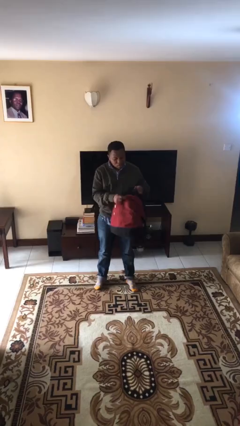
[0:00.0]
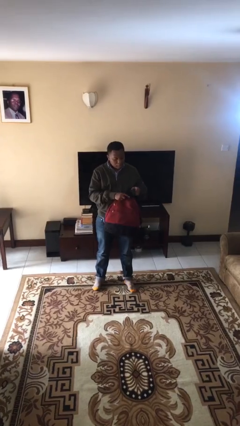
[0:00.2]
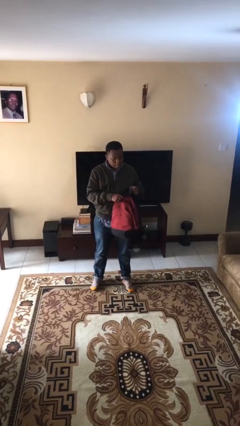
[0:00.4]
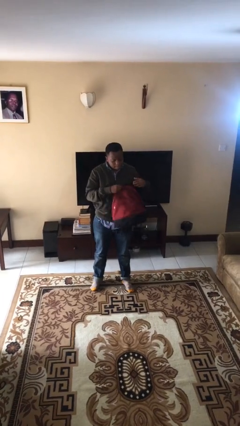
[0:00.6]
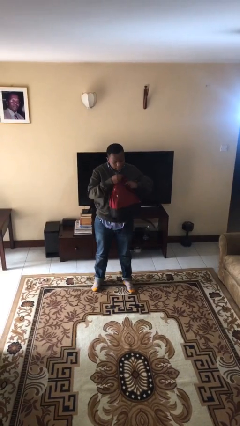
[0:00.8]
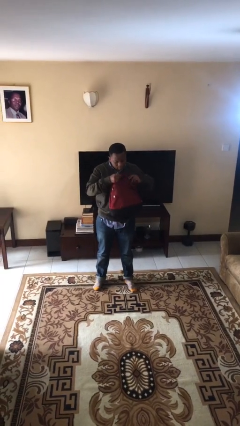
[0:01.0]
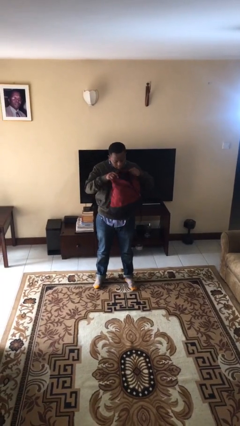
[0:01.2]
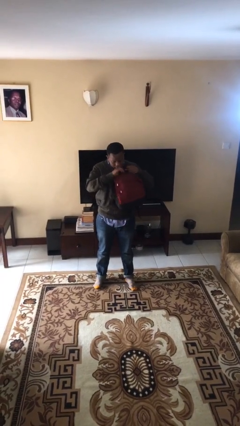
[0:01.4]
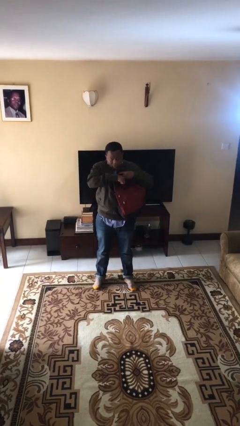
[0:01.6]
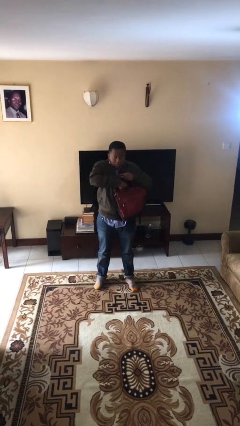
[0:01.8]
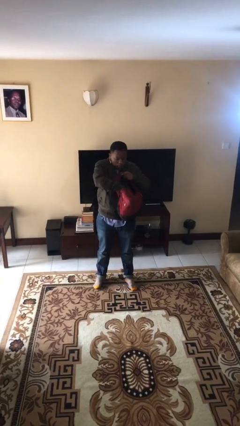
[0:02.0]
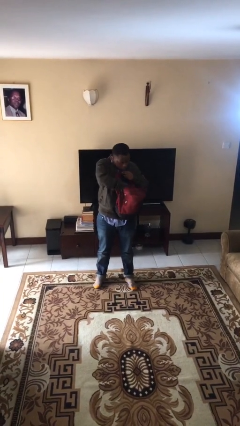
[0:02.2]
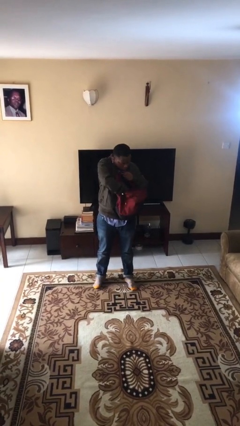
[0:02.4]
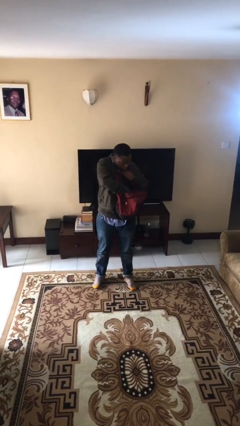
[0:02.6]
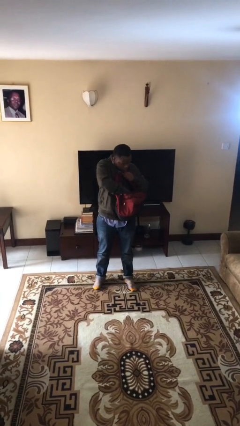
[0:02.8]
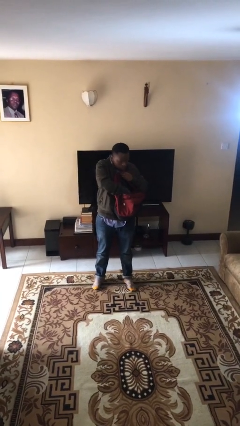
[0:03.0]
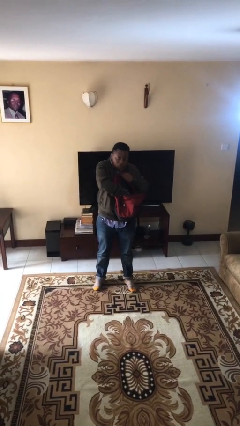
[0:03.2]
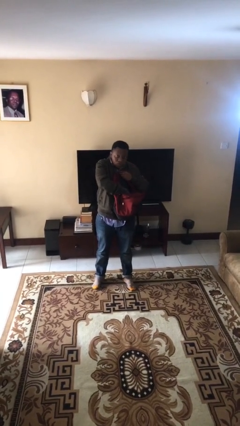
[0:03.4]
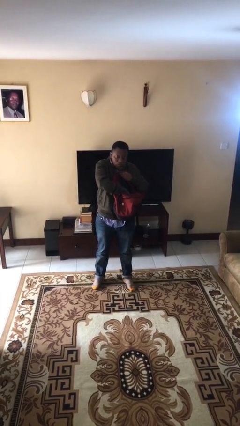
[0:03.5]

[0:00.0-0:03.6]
person searches in backpack

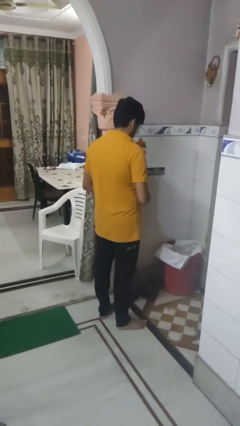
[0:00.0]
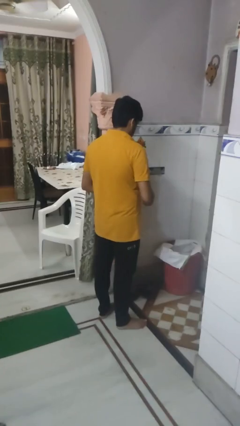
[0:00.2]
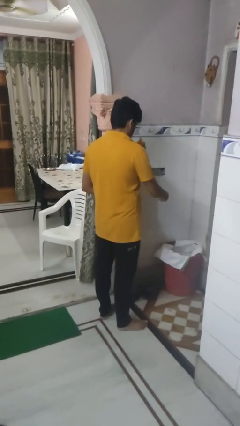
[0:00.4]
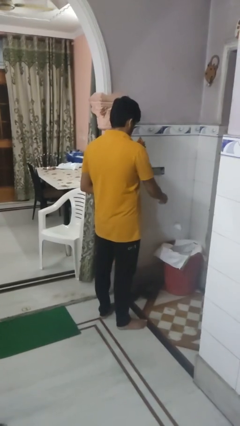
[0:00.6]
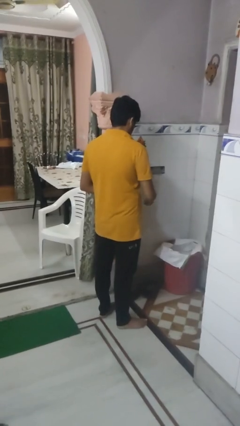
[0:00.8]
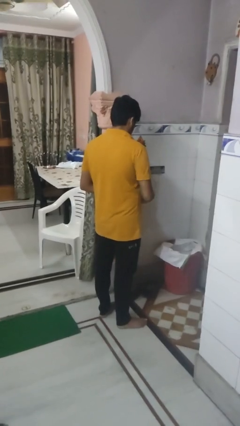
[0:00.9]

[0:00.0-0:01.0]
person discards trash

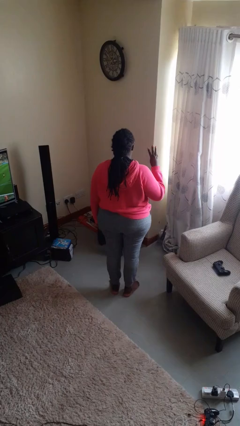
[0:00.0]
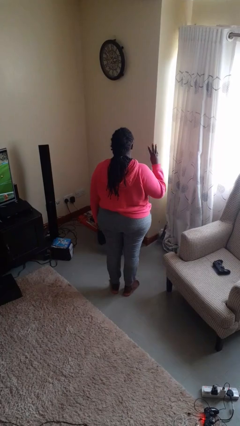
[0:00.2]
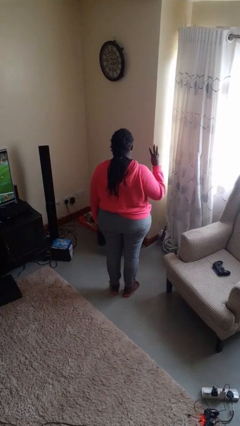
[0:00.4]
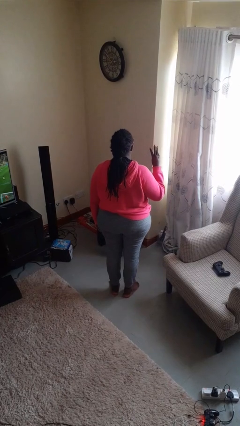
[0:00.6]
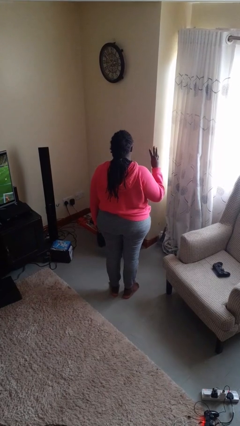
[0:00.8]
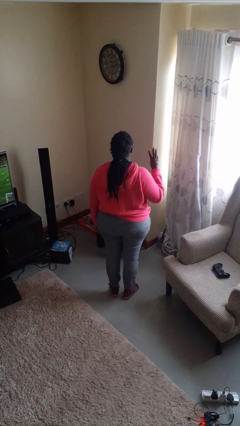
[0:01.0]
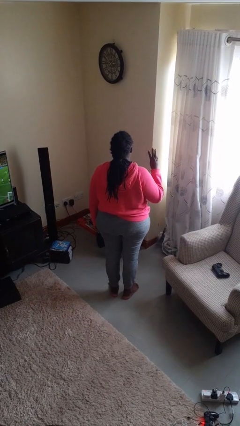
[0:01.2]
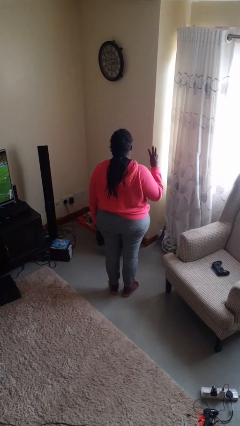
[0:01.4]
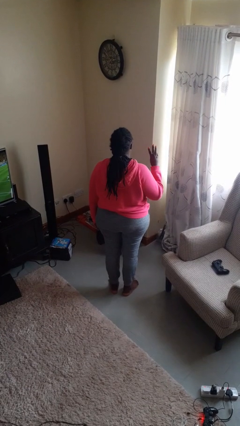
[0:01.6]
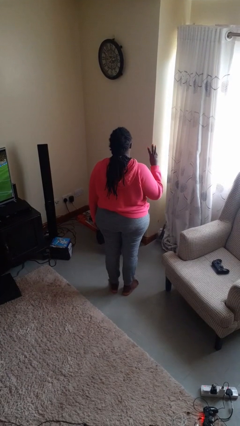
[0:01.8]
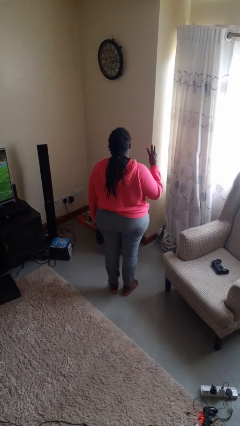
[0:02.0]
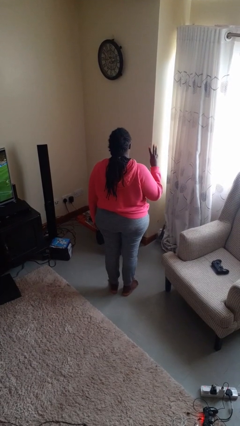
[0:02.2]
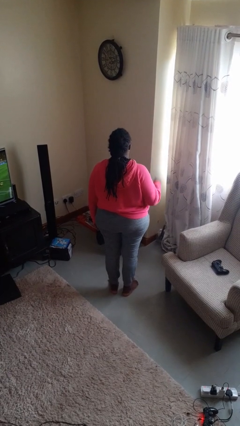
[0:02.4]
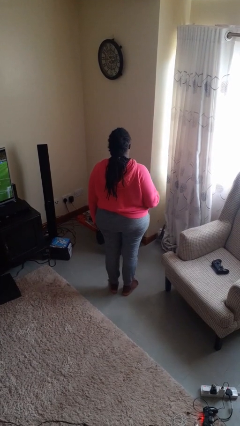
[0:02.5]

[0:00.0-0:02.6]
person gestures number three

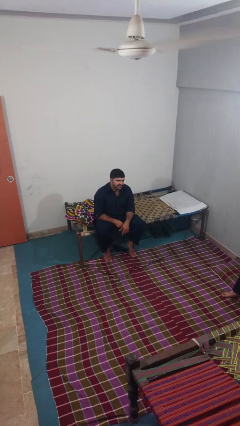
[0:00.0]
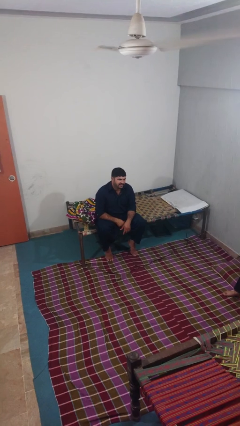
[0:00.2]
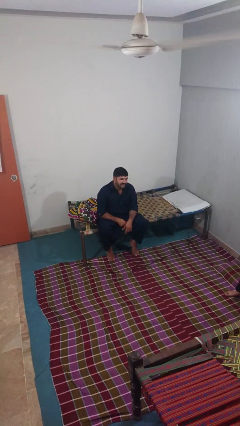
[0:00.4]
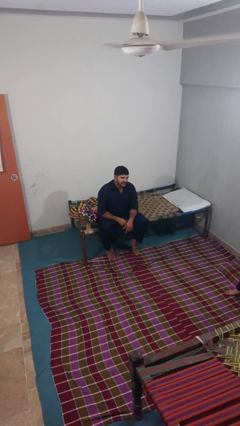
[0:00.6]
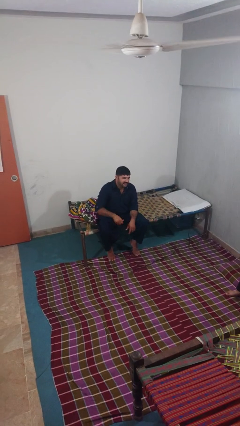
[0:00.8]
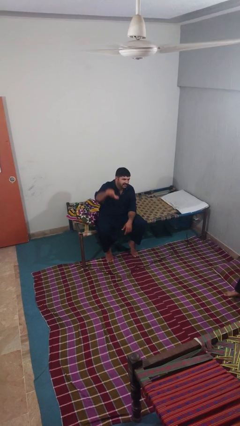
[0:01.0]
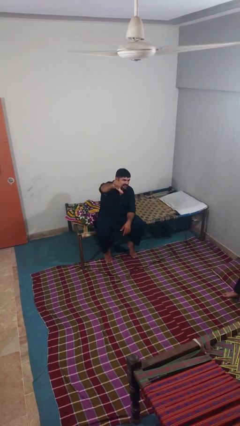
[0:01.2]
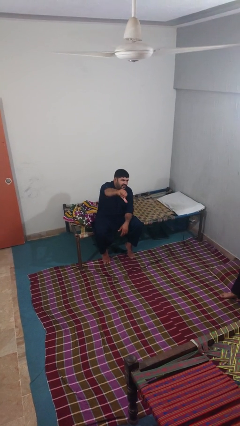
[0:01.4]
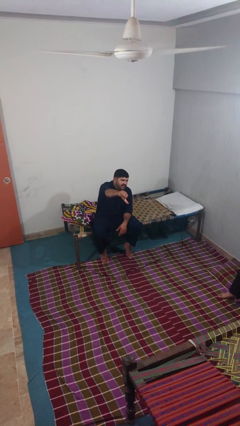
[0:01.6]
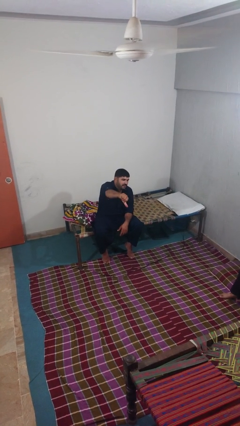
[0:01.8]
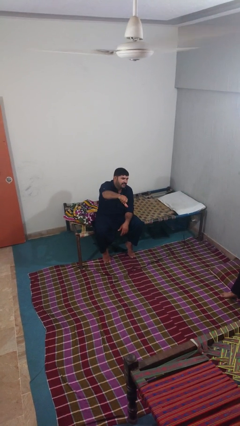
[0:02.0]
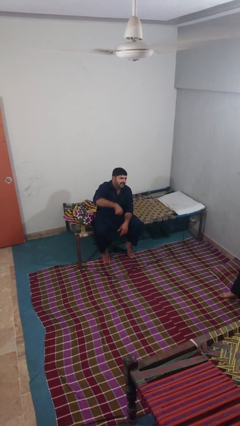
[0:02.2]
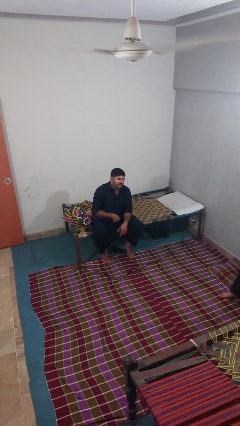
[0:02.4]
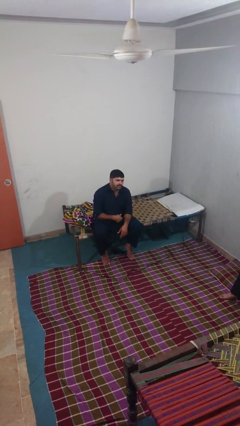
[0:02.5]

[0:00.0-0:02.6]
person gestures thumbs down

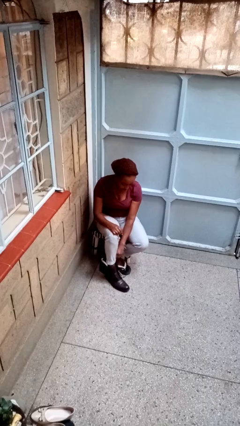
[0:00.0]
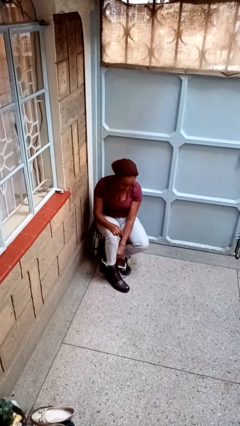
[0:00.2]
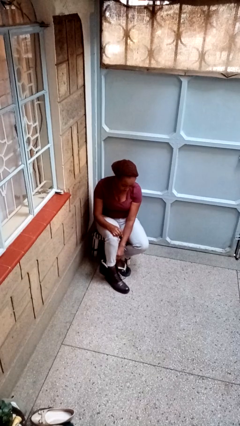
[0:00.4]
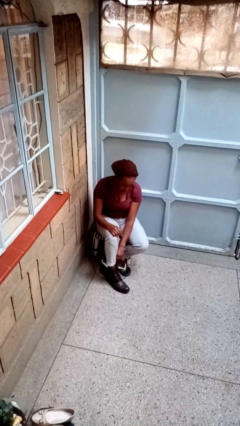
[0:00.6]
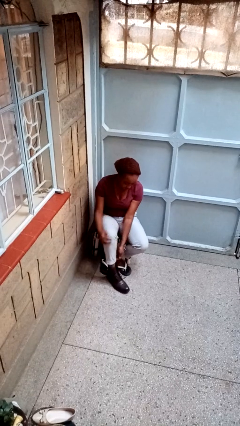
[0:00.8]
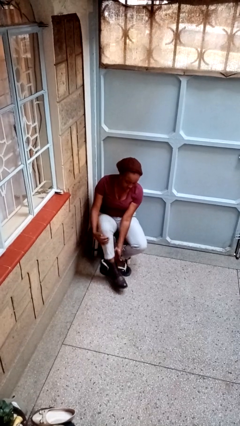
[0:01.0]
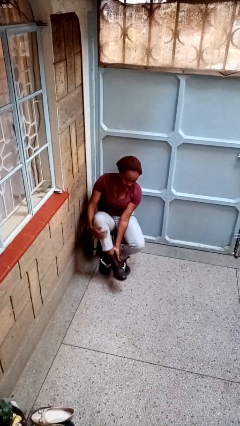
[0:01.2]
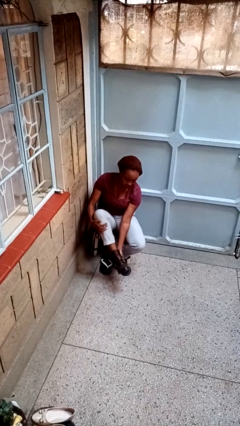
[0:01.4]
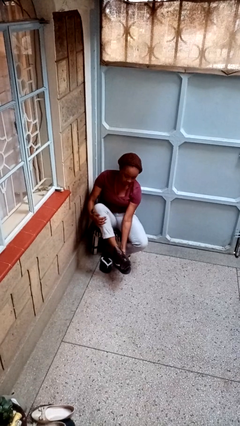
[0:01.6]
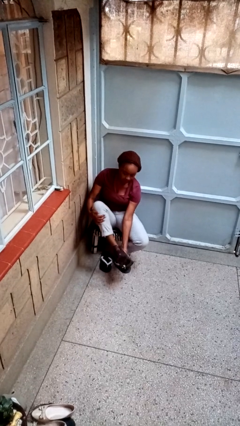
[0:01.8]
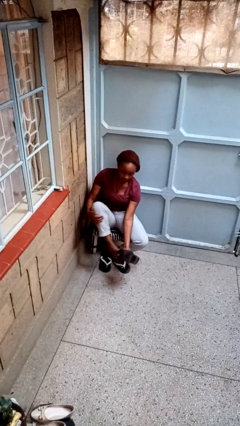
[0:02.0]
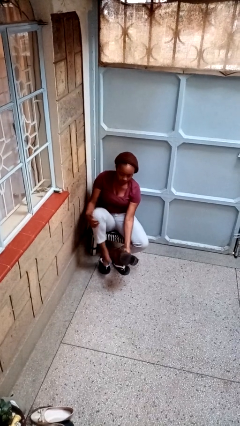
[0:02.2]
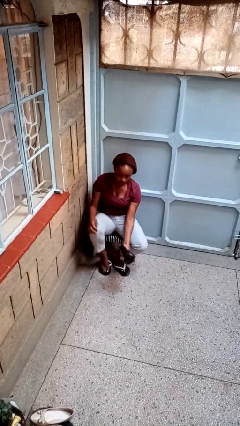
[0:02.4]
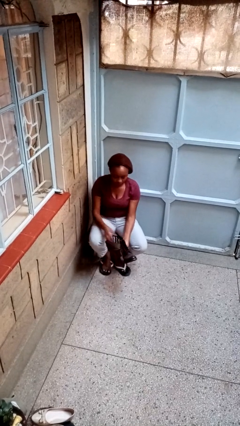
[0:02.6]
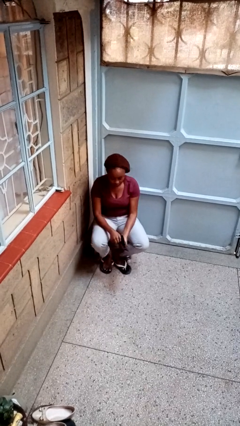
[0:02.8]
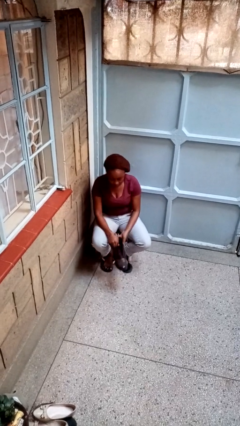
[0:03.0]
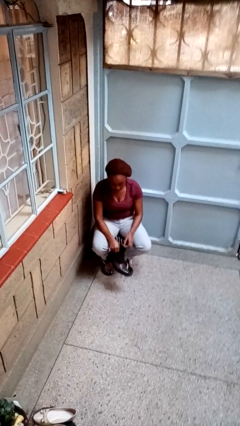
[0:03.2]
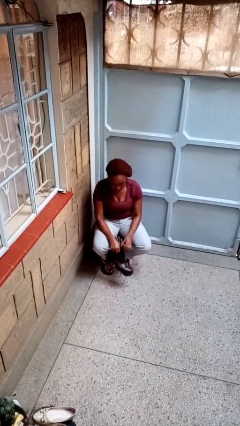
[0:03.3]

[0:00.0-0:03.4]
person takes off boots

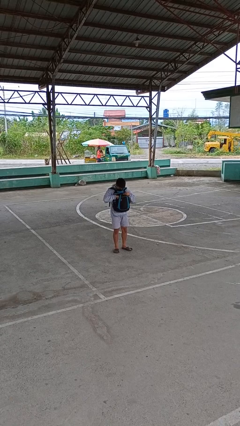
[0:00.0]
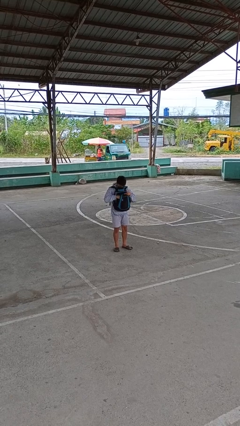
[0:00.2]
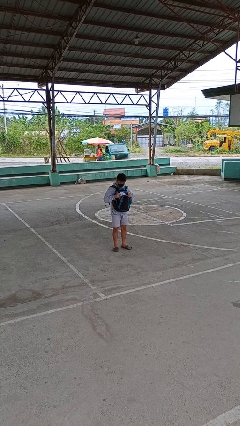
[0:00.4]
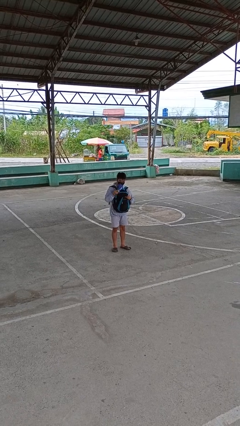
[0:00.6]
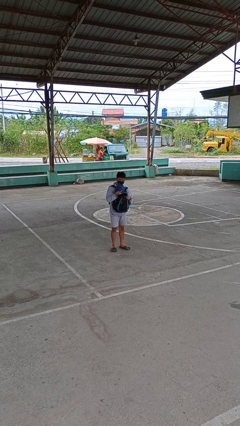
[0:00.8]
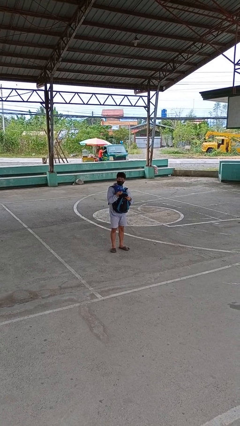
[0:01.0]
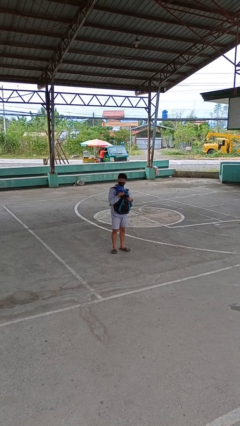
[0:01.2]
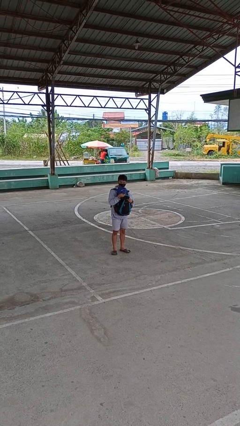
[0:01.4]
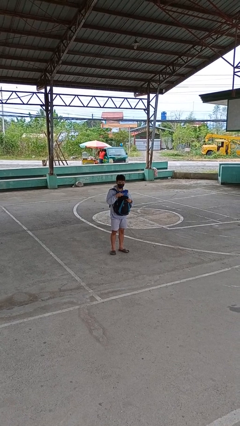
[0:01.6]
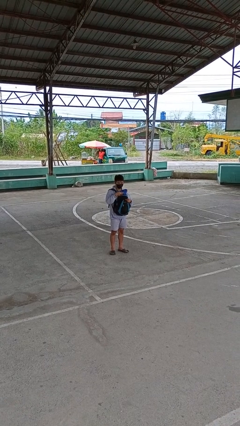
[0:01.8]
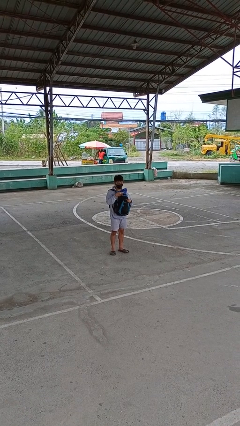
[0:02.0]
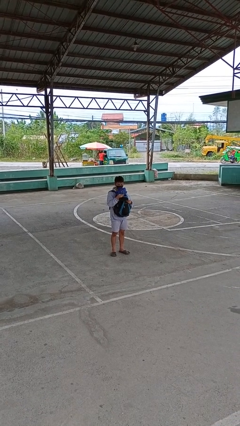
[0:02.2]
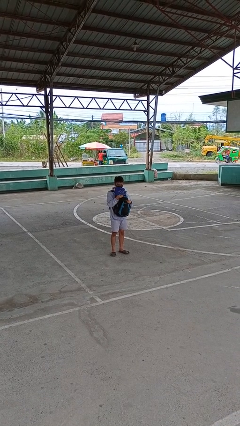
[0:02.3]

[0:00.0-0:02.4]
person takes object from backpack

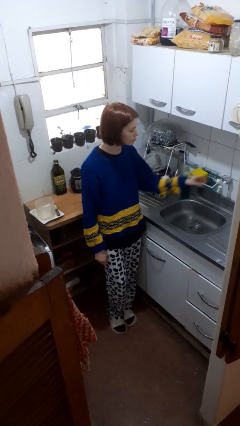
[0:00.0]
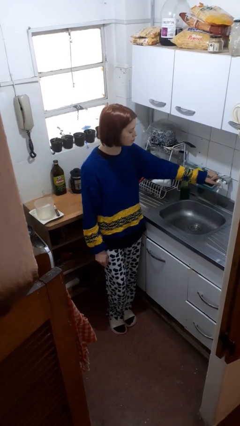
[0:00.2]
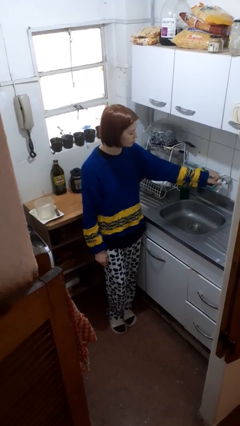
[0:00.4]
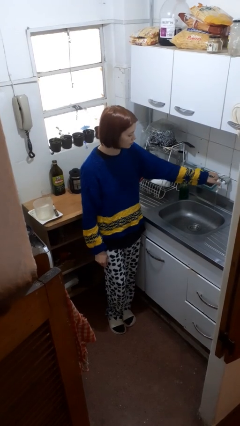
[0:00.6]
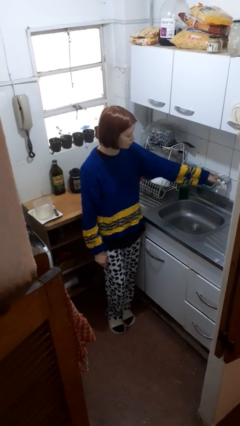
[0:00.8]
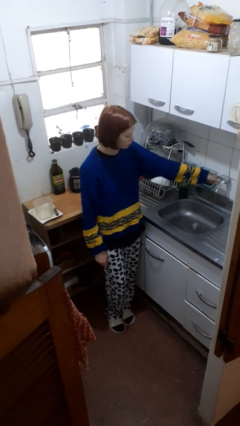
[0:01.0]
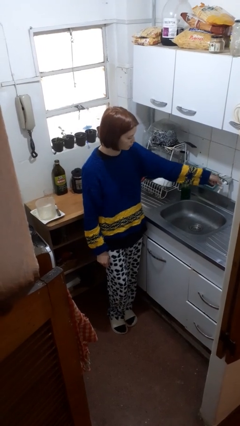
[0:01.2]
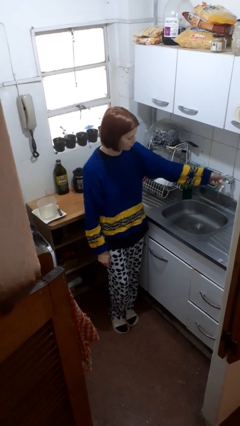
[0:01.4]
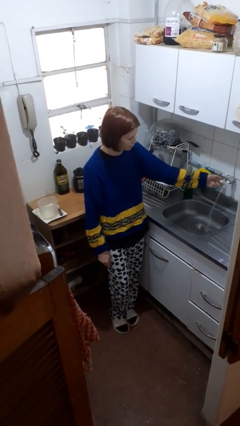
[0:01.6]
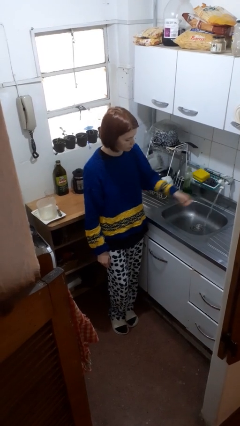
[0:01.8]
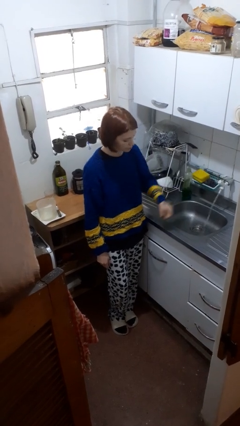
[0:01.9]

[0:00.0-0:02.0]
person turns on faucet
